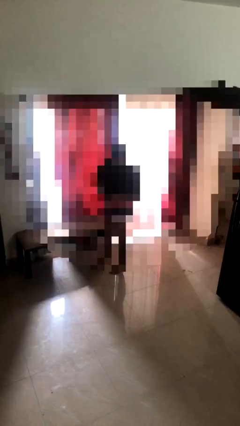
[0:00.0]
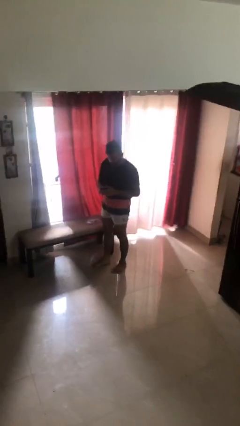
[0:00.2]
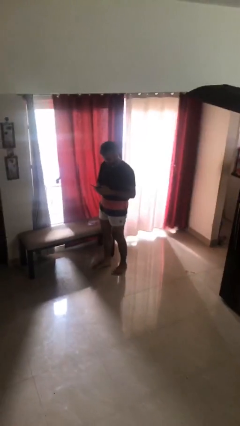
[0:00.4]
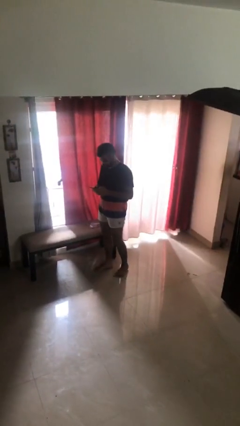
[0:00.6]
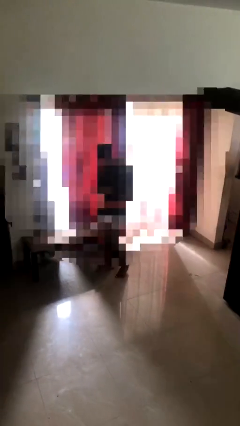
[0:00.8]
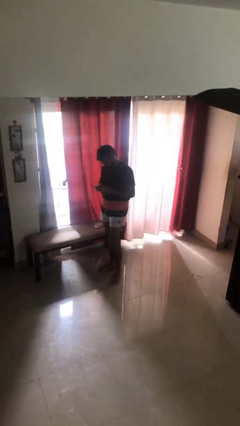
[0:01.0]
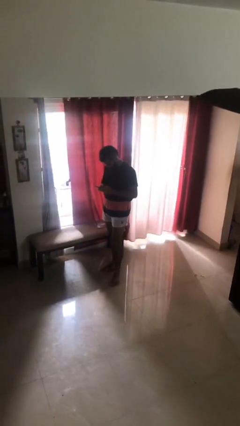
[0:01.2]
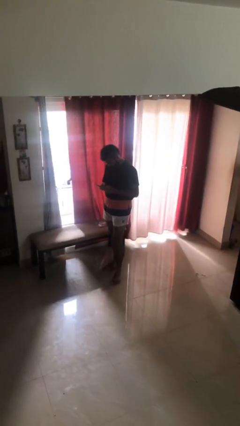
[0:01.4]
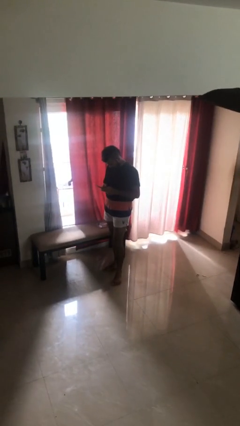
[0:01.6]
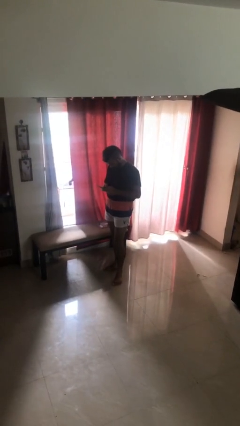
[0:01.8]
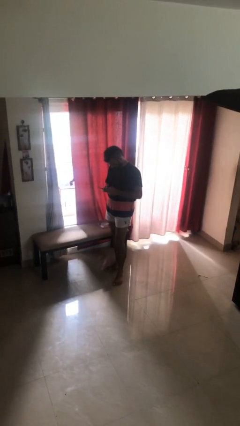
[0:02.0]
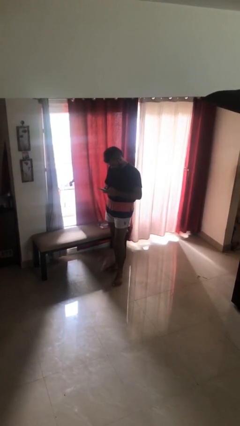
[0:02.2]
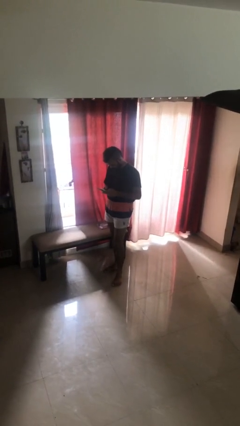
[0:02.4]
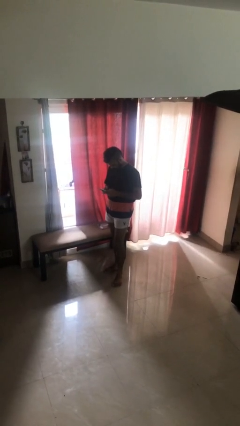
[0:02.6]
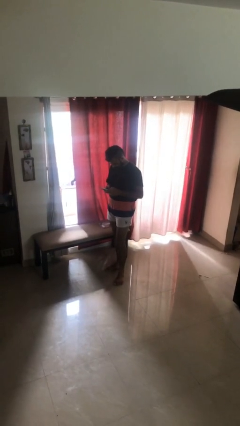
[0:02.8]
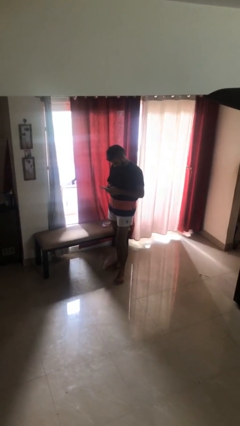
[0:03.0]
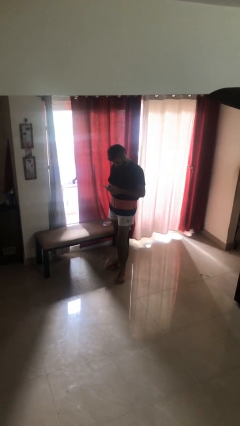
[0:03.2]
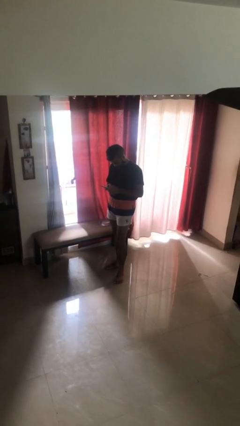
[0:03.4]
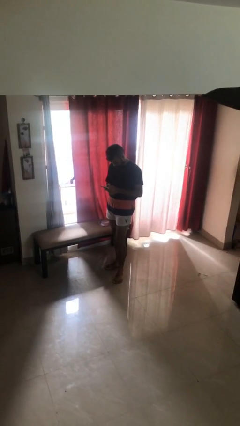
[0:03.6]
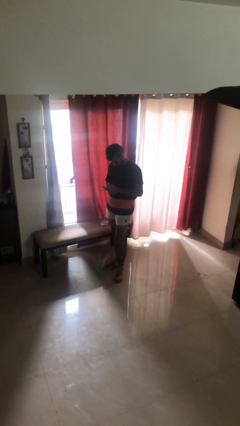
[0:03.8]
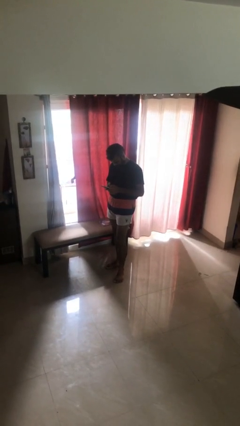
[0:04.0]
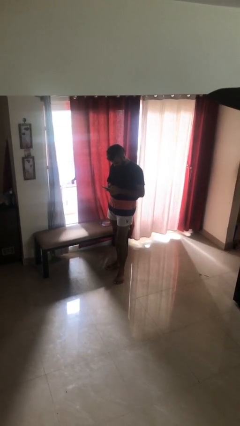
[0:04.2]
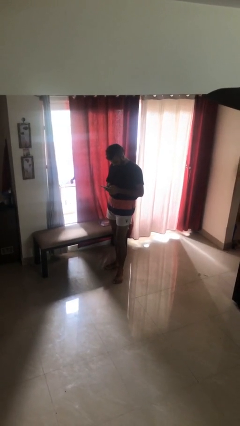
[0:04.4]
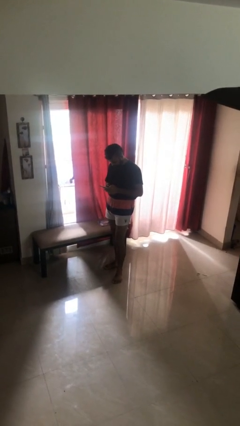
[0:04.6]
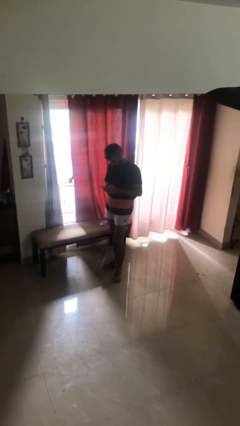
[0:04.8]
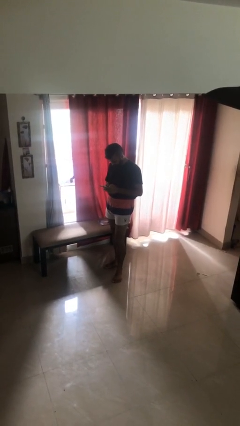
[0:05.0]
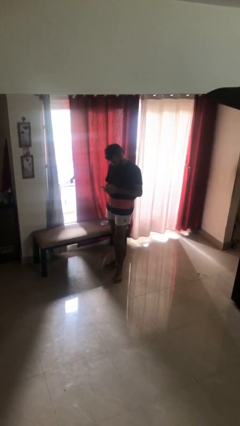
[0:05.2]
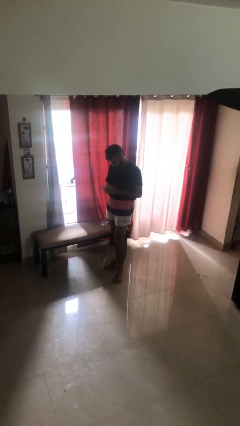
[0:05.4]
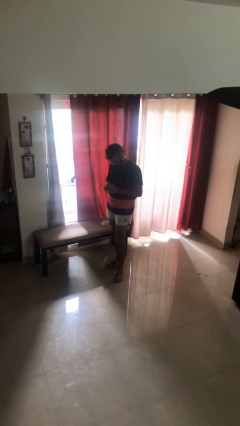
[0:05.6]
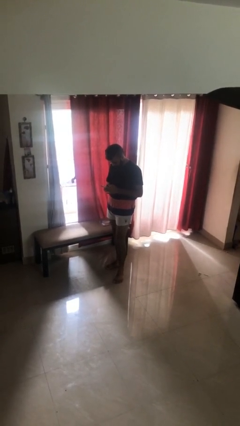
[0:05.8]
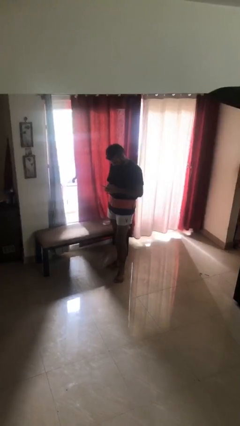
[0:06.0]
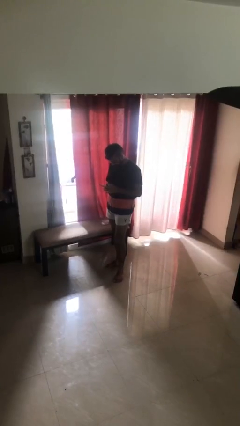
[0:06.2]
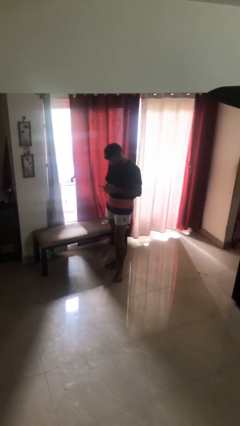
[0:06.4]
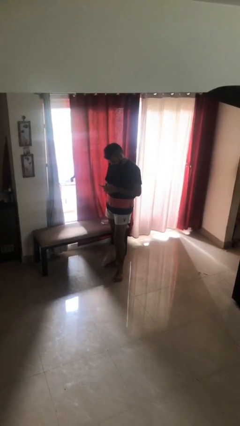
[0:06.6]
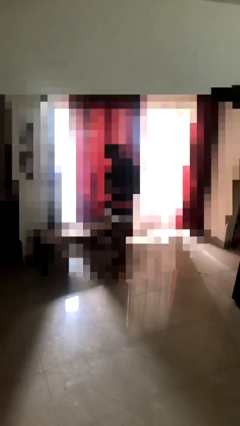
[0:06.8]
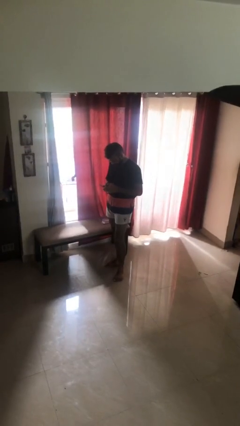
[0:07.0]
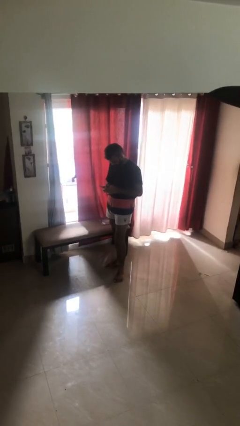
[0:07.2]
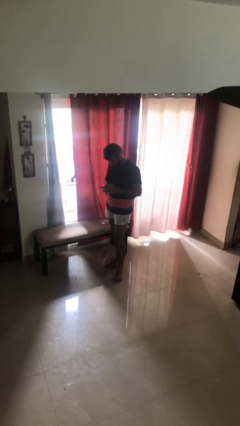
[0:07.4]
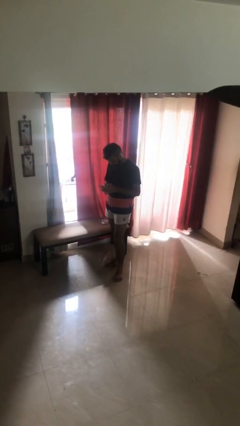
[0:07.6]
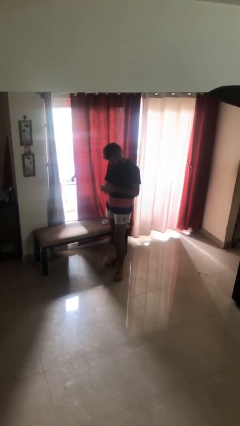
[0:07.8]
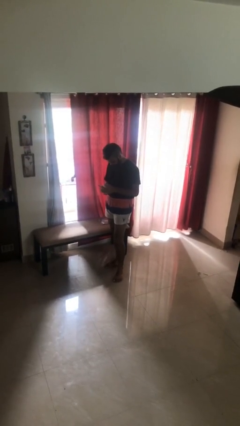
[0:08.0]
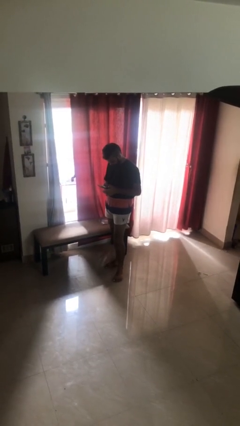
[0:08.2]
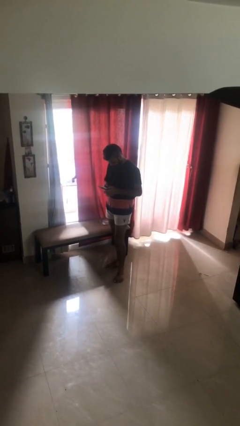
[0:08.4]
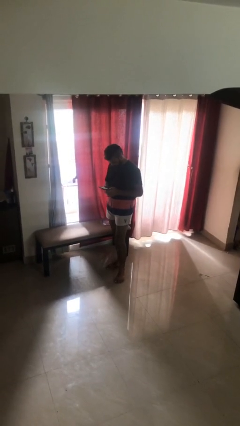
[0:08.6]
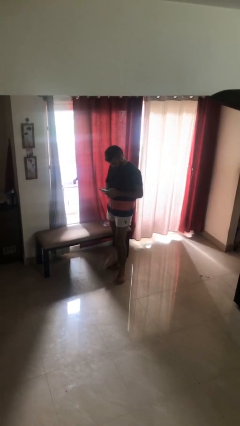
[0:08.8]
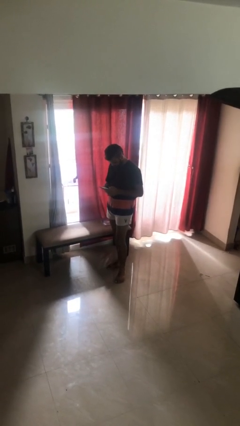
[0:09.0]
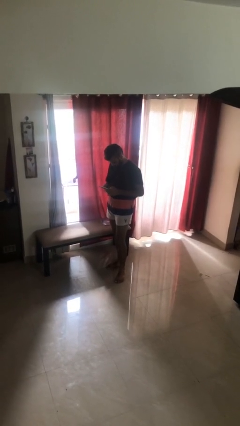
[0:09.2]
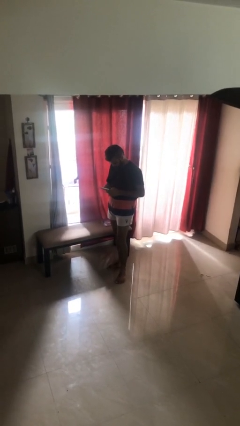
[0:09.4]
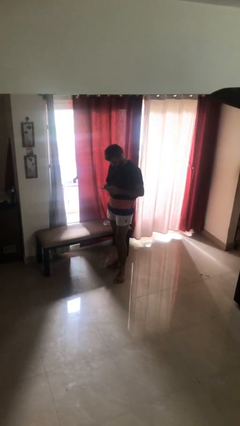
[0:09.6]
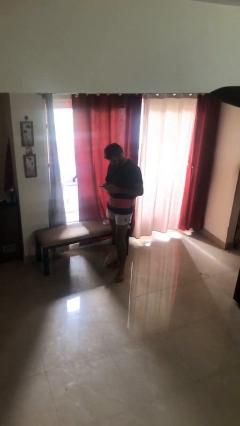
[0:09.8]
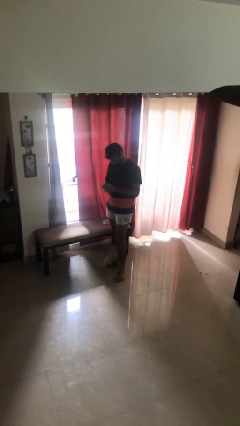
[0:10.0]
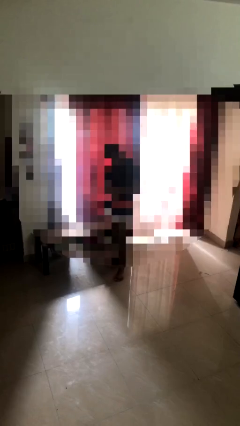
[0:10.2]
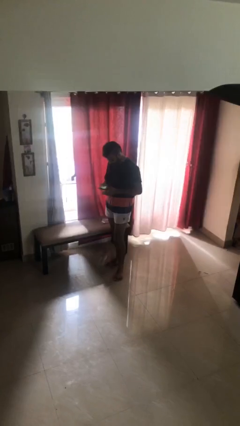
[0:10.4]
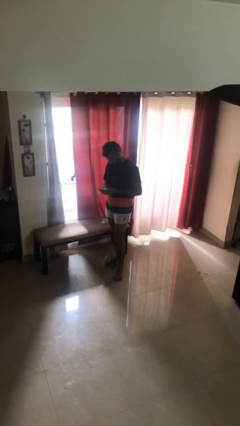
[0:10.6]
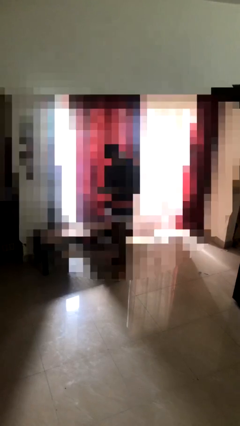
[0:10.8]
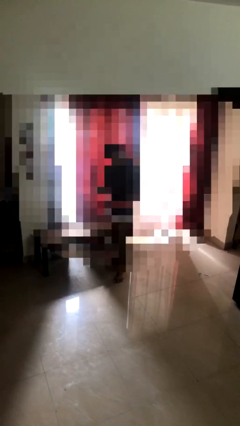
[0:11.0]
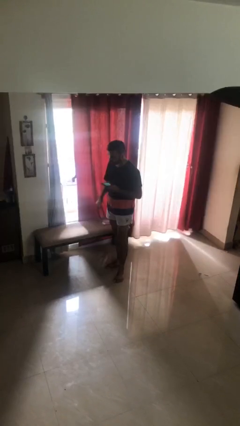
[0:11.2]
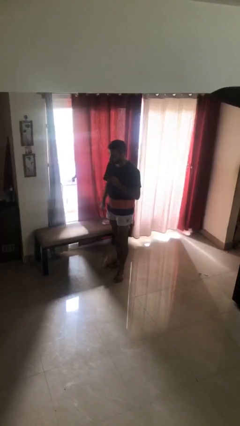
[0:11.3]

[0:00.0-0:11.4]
person texts on phone

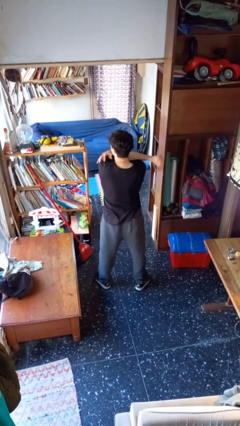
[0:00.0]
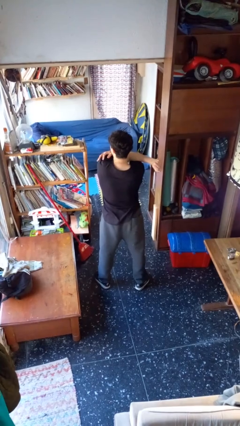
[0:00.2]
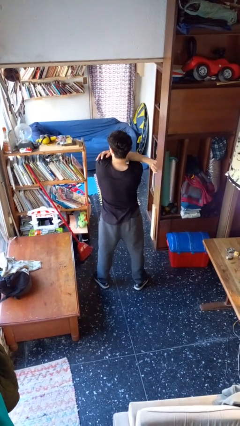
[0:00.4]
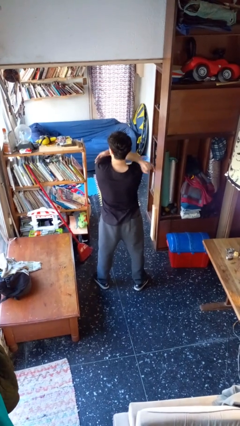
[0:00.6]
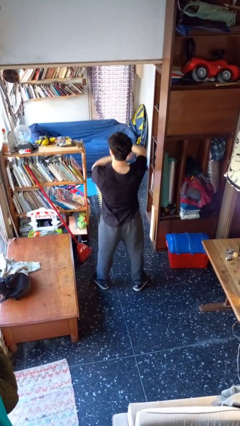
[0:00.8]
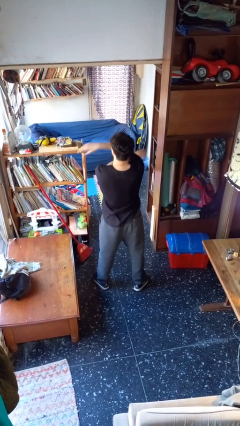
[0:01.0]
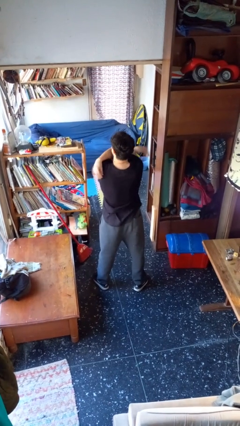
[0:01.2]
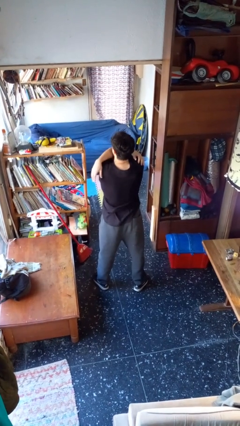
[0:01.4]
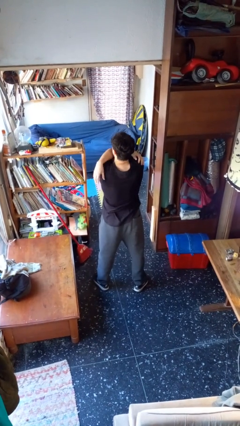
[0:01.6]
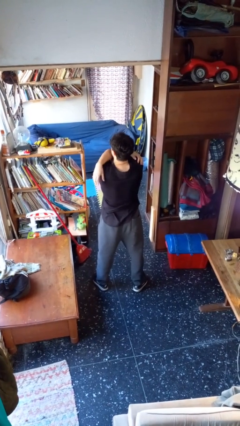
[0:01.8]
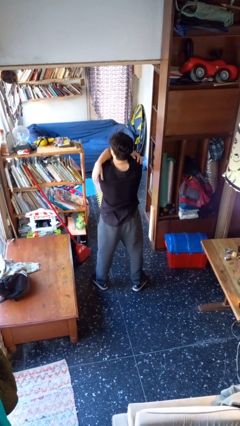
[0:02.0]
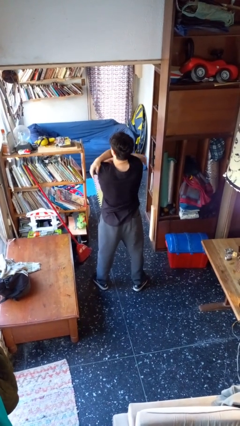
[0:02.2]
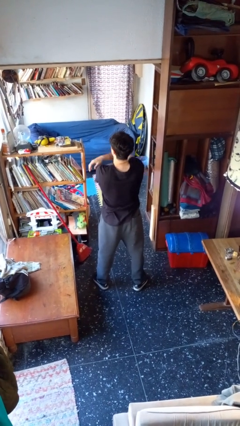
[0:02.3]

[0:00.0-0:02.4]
person stretches arms to side

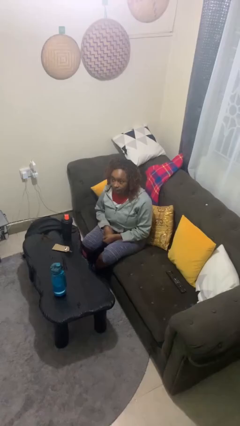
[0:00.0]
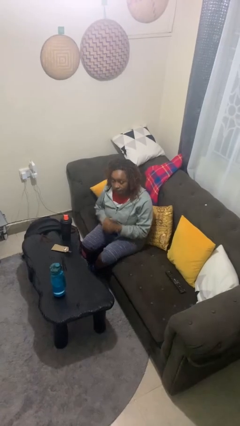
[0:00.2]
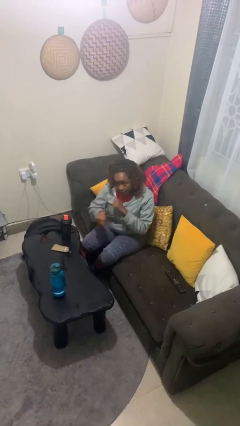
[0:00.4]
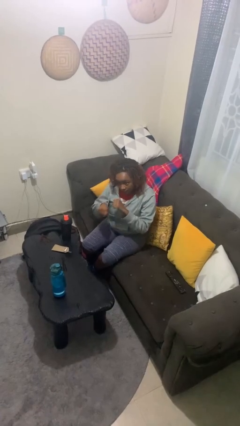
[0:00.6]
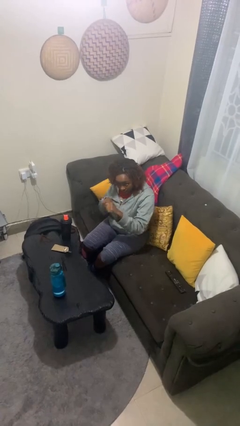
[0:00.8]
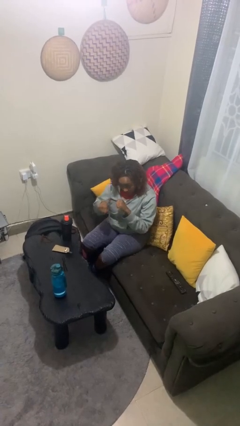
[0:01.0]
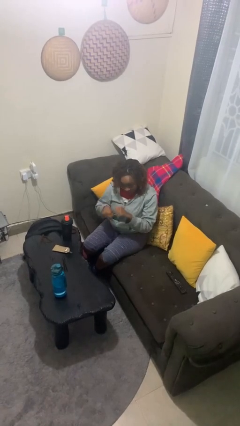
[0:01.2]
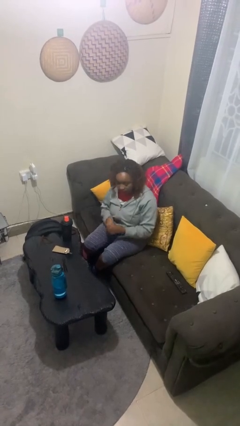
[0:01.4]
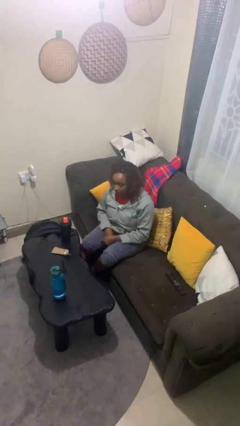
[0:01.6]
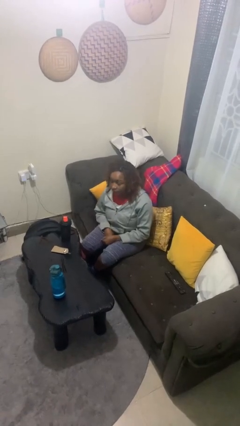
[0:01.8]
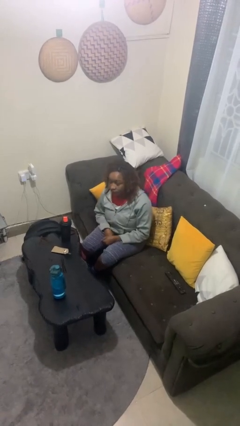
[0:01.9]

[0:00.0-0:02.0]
person punches

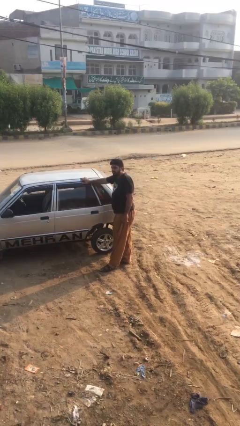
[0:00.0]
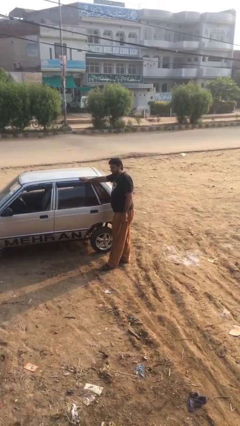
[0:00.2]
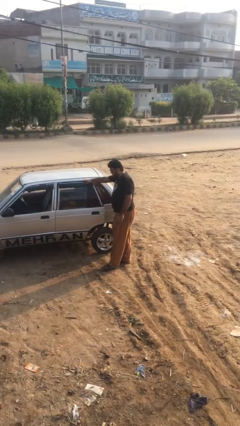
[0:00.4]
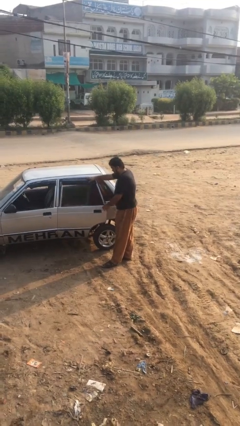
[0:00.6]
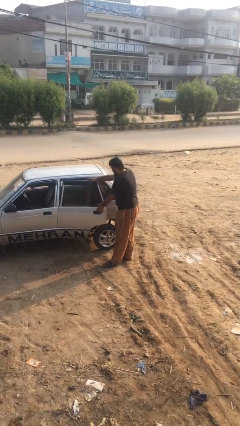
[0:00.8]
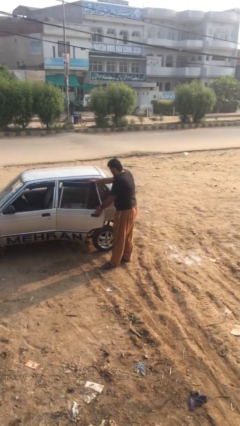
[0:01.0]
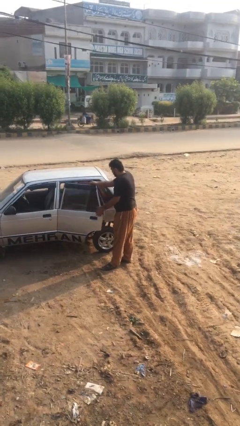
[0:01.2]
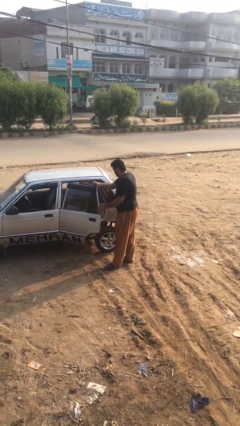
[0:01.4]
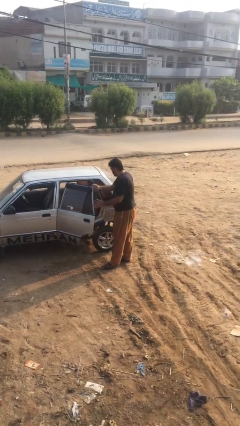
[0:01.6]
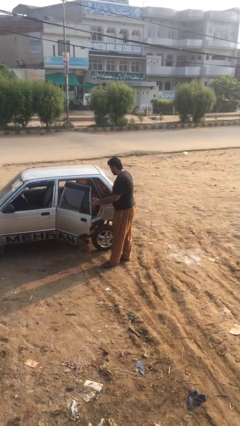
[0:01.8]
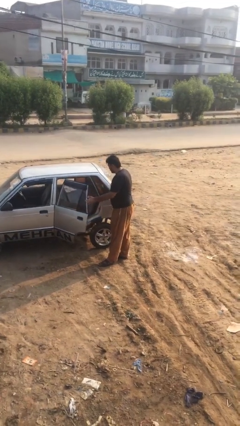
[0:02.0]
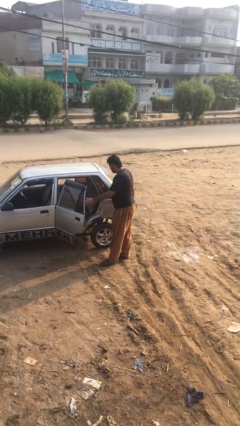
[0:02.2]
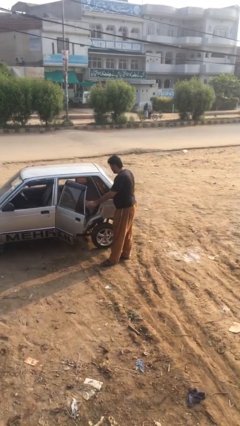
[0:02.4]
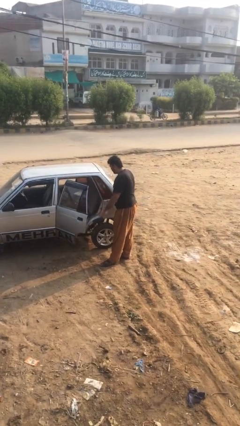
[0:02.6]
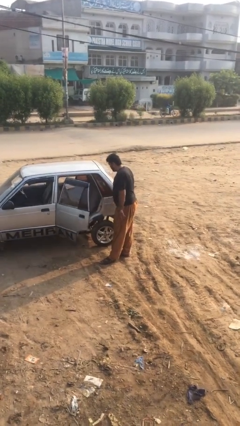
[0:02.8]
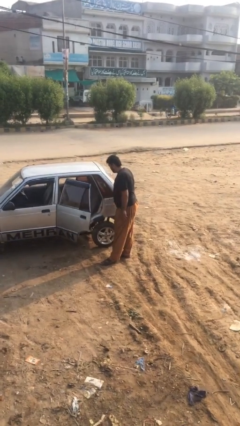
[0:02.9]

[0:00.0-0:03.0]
person opens car door
